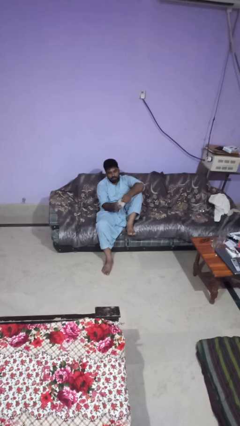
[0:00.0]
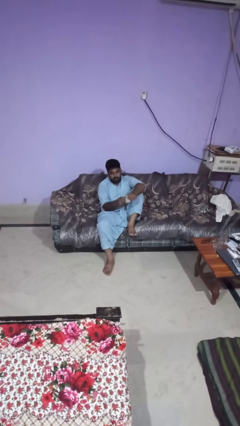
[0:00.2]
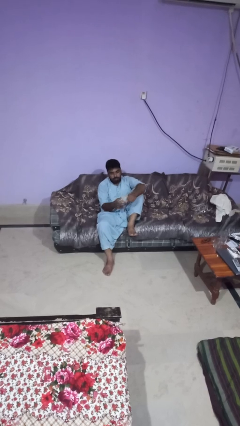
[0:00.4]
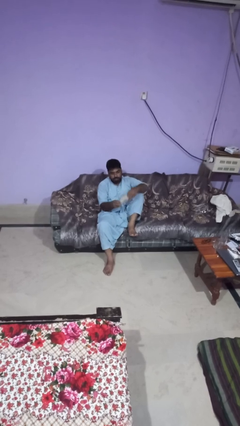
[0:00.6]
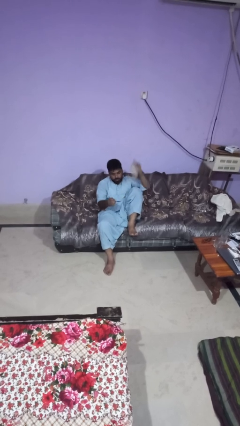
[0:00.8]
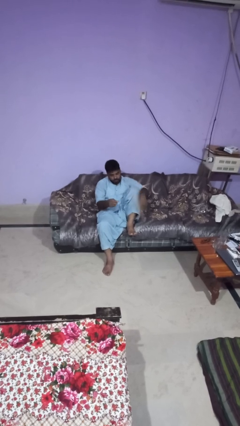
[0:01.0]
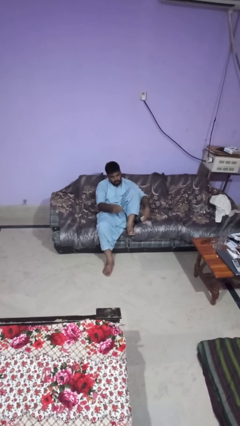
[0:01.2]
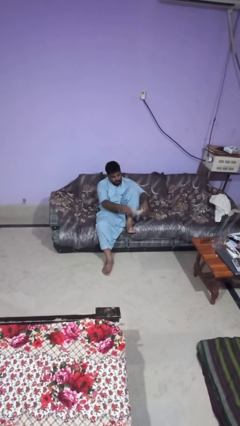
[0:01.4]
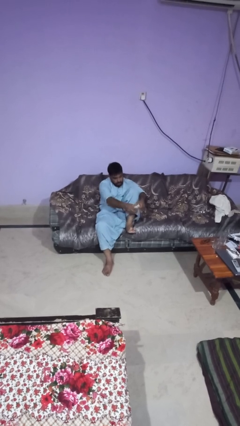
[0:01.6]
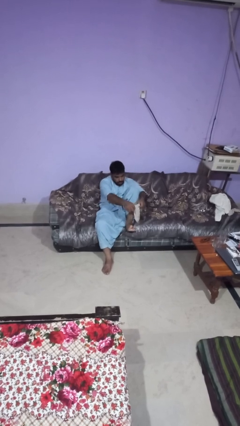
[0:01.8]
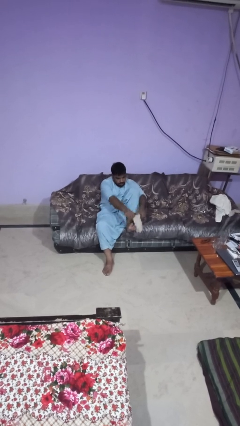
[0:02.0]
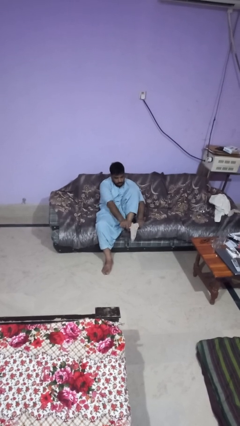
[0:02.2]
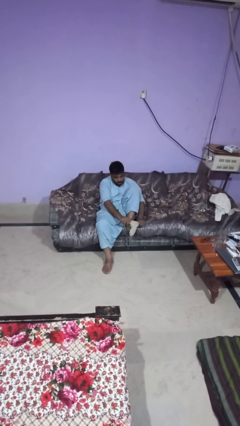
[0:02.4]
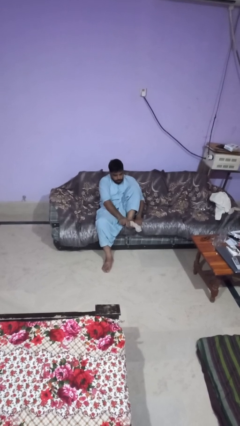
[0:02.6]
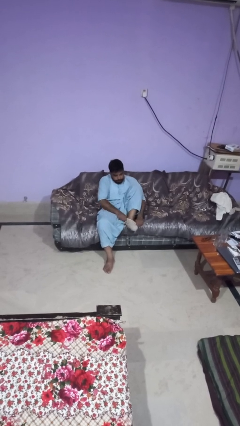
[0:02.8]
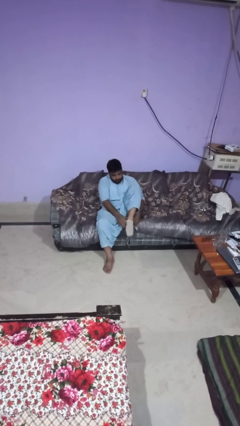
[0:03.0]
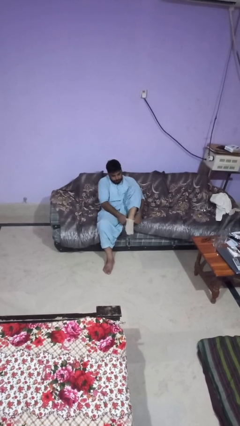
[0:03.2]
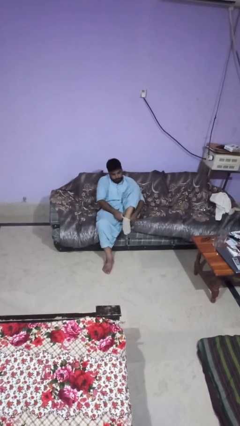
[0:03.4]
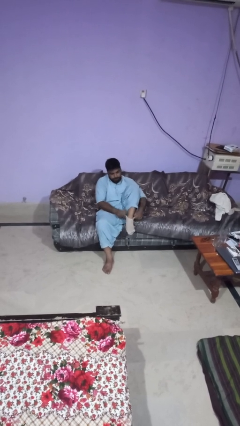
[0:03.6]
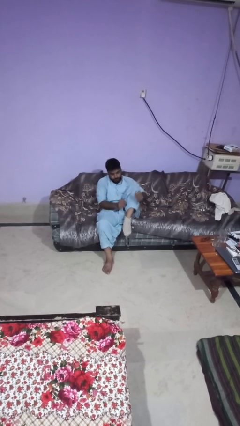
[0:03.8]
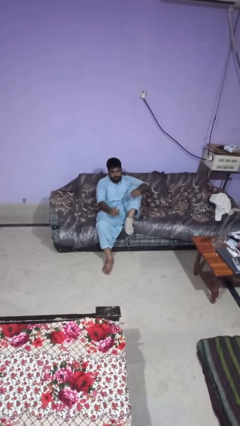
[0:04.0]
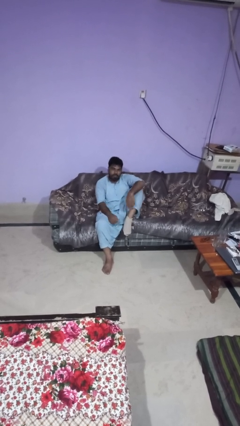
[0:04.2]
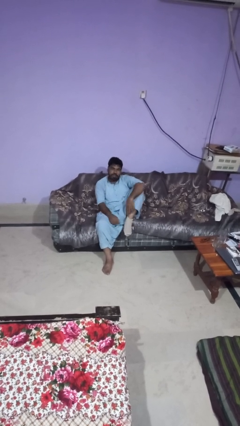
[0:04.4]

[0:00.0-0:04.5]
person puts on socks

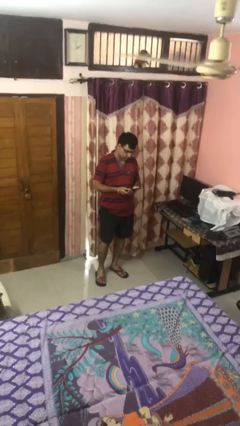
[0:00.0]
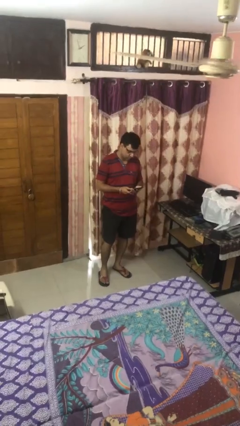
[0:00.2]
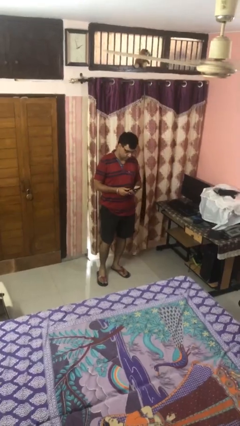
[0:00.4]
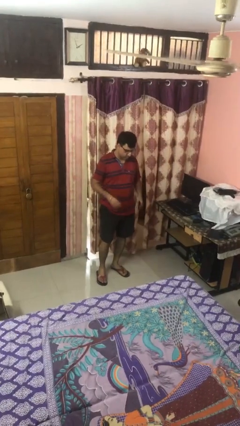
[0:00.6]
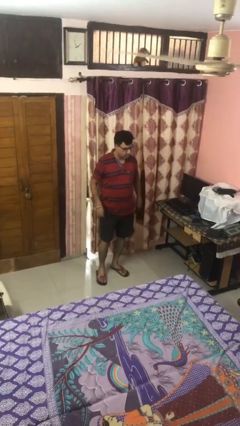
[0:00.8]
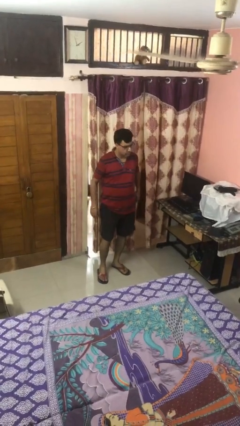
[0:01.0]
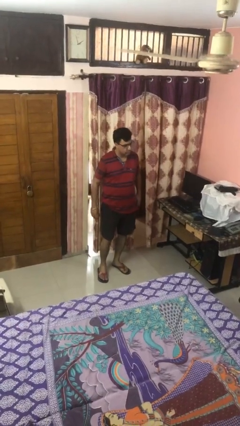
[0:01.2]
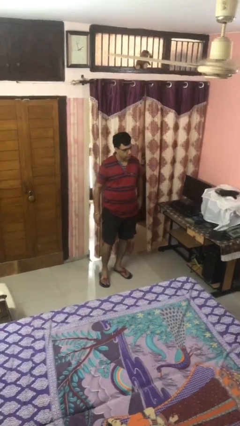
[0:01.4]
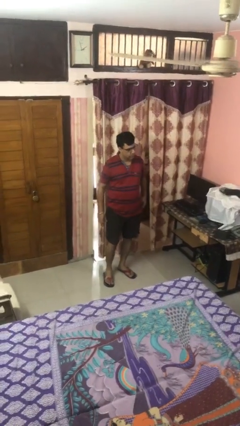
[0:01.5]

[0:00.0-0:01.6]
person puts phone into pocket

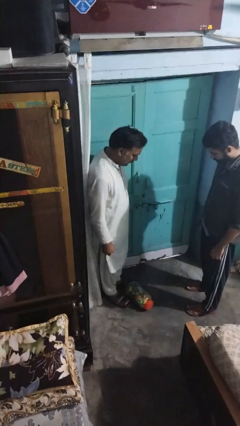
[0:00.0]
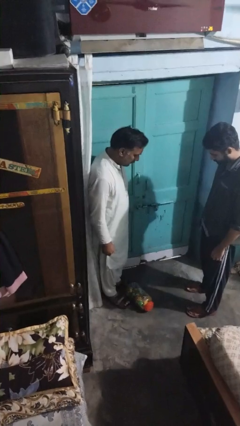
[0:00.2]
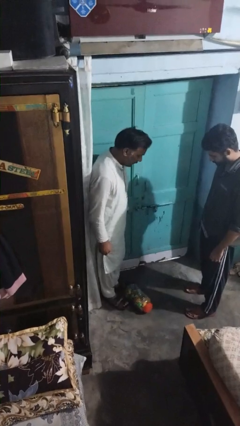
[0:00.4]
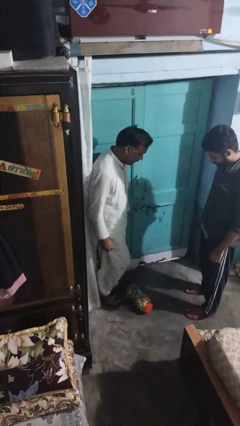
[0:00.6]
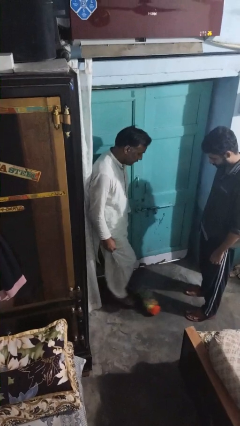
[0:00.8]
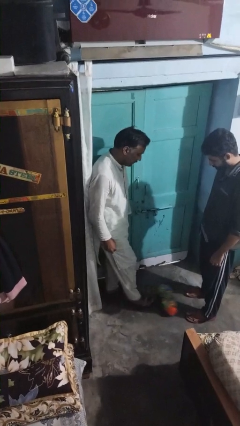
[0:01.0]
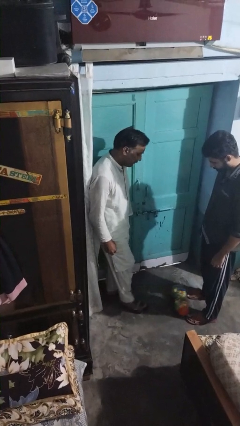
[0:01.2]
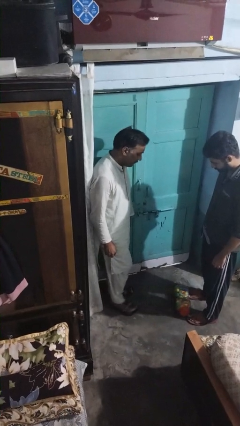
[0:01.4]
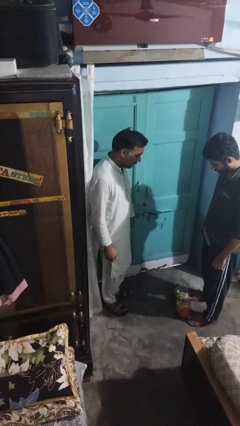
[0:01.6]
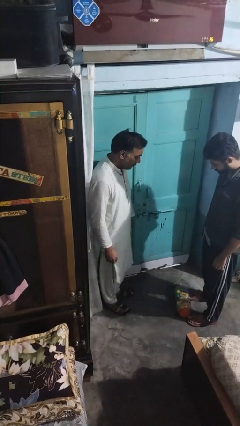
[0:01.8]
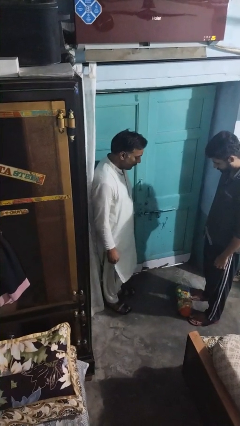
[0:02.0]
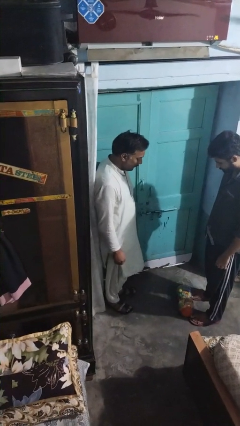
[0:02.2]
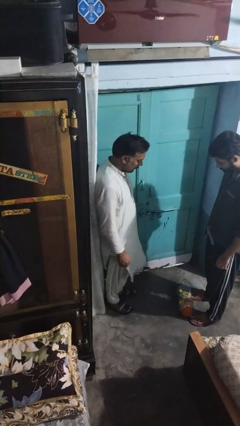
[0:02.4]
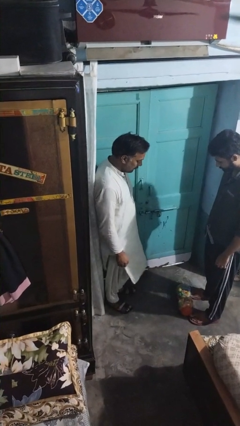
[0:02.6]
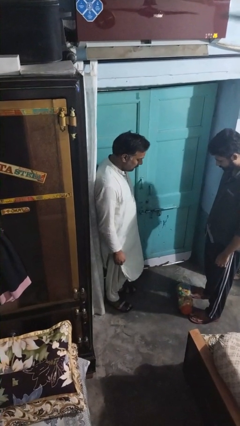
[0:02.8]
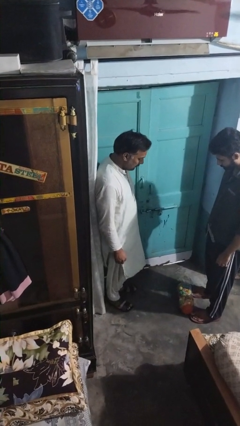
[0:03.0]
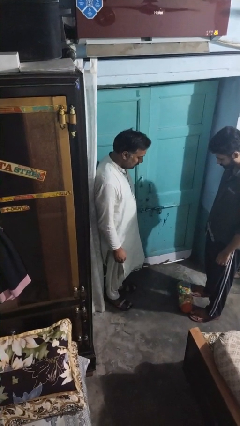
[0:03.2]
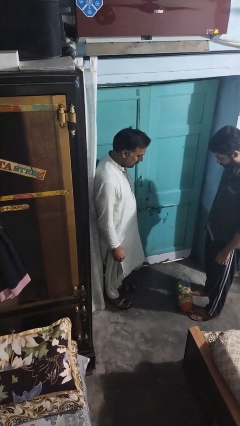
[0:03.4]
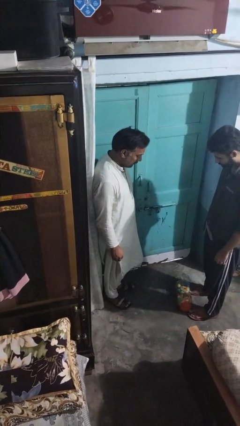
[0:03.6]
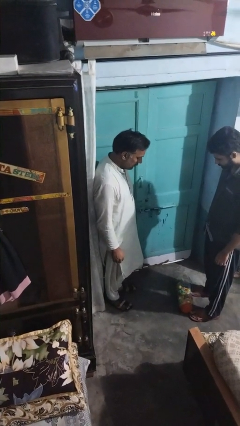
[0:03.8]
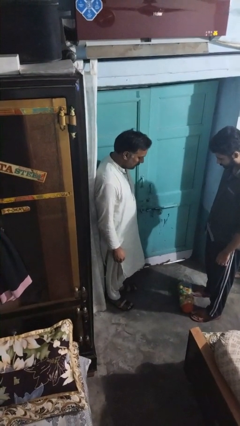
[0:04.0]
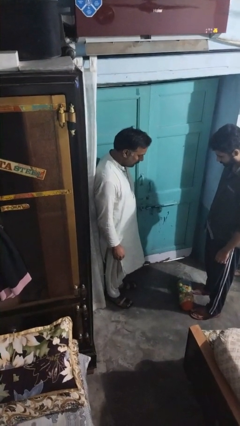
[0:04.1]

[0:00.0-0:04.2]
person kicks object to person

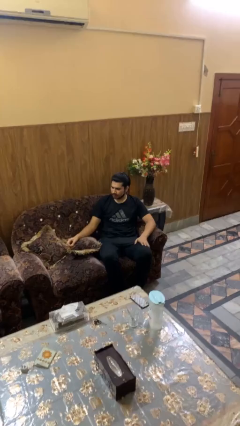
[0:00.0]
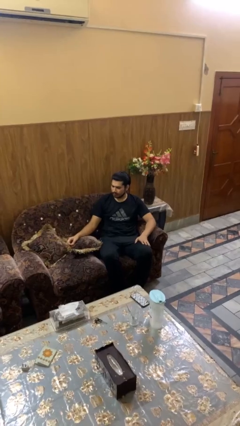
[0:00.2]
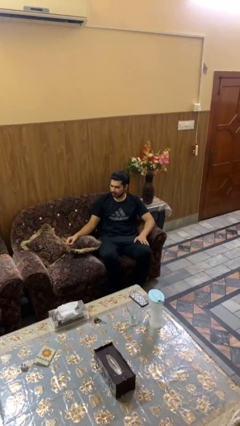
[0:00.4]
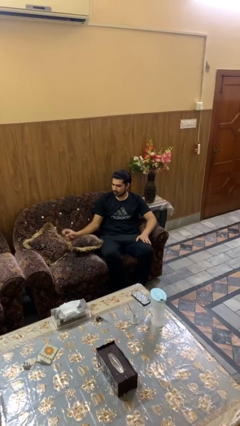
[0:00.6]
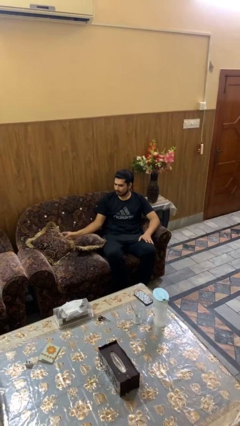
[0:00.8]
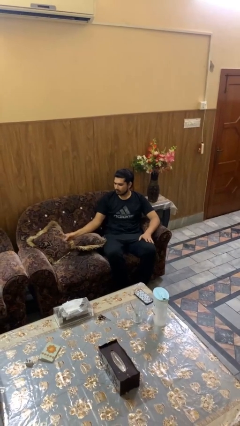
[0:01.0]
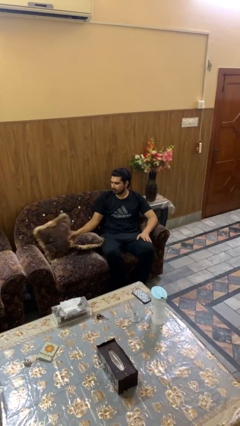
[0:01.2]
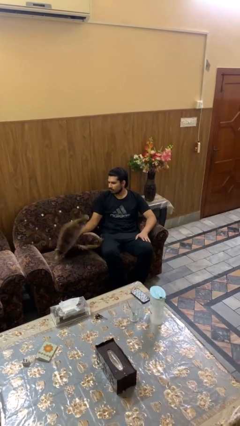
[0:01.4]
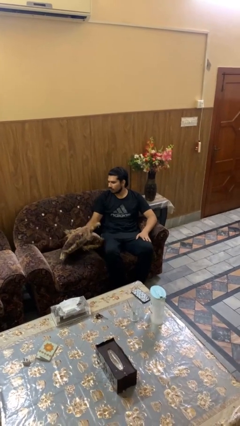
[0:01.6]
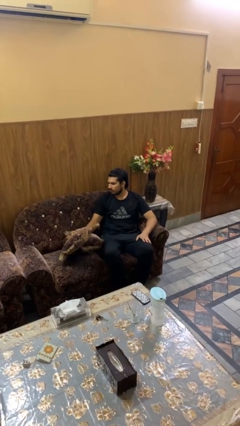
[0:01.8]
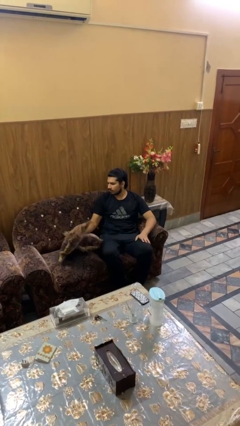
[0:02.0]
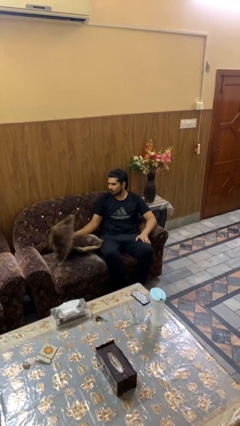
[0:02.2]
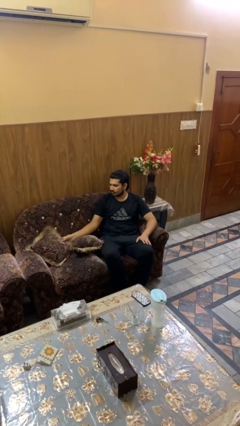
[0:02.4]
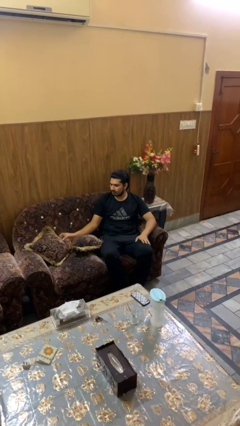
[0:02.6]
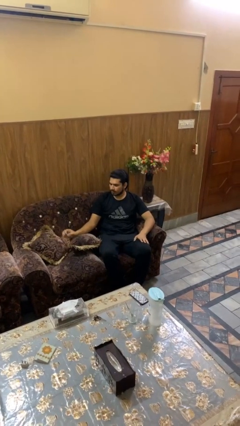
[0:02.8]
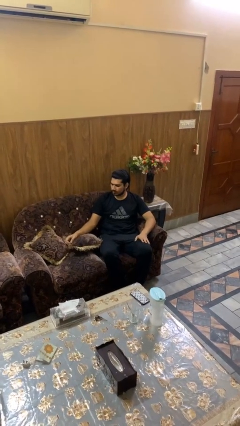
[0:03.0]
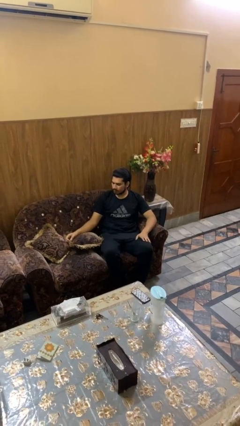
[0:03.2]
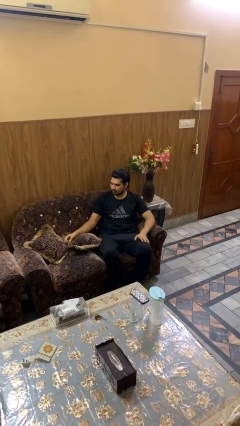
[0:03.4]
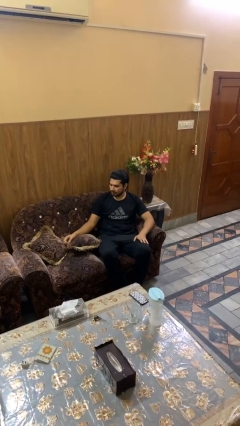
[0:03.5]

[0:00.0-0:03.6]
person searches in couch

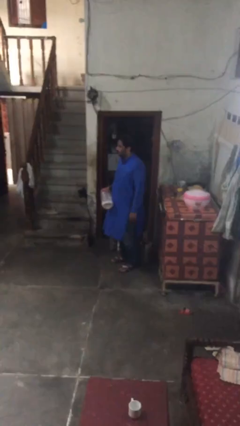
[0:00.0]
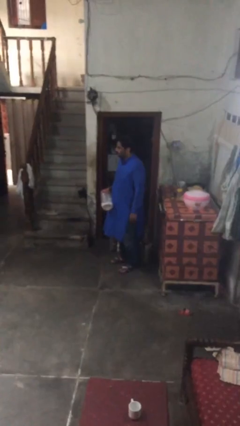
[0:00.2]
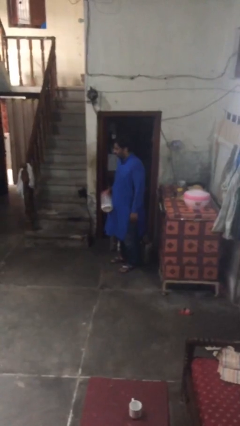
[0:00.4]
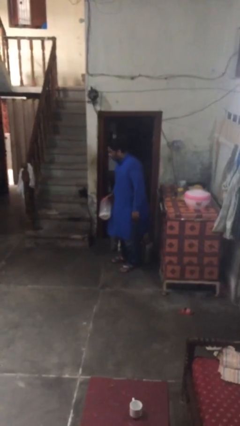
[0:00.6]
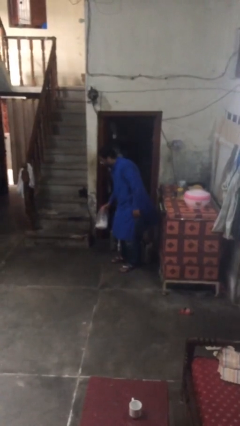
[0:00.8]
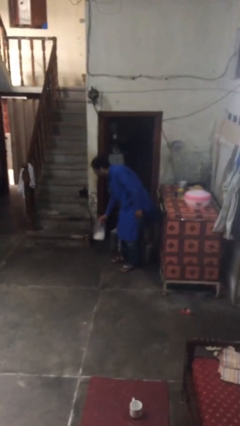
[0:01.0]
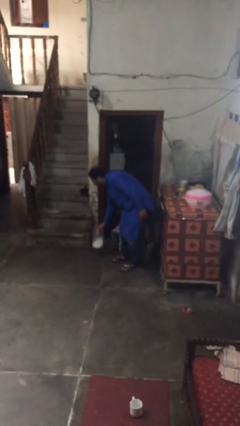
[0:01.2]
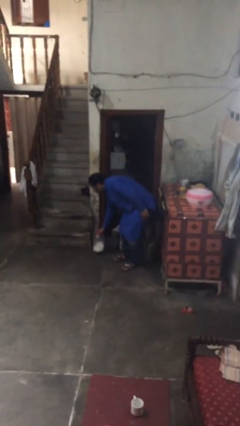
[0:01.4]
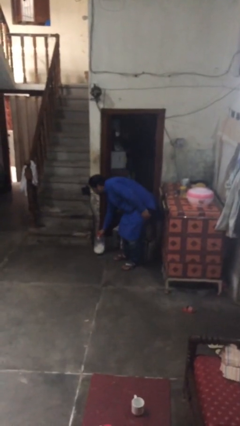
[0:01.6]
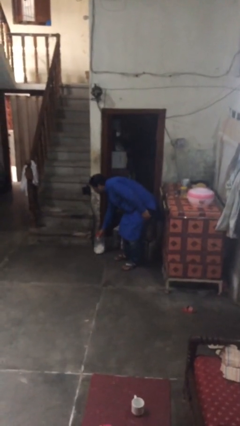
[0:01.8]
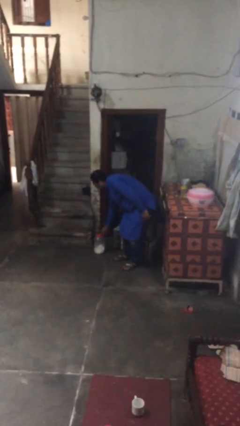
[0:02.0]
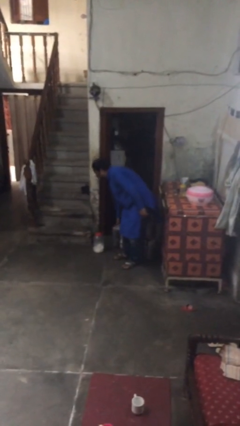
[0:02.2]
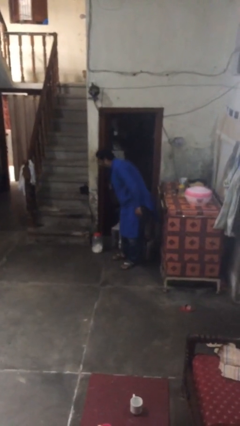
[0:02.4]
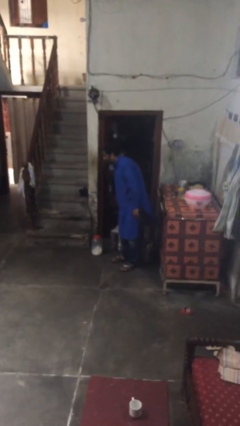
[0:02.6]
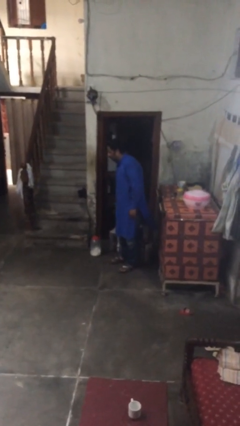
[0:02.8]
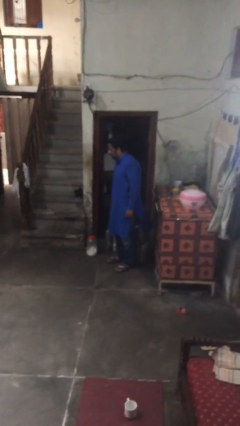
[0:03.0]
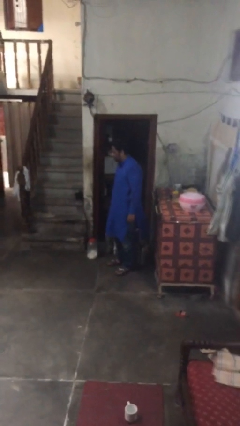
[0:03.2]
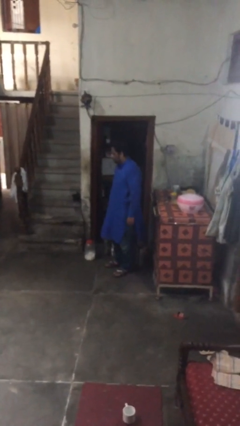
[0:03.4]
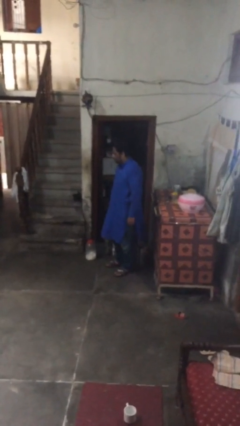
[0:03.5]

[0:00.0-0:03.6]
person puts down object on floor
